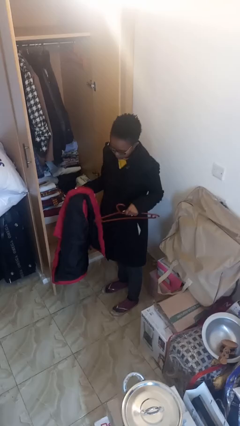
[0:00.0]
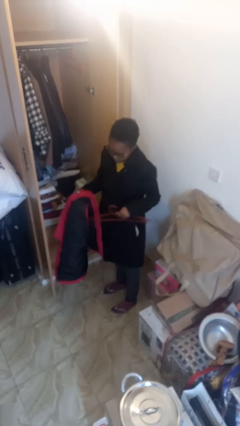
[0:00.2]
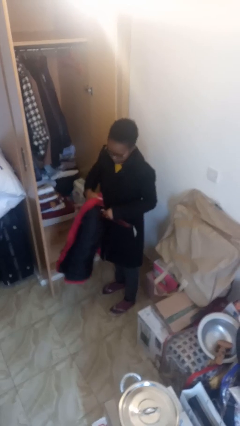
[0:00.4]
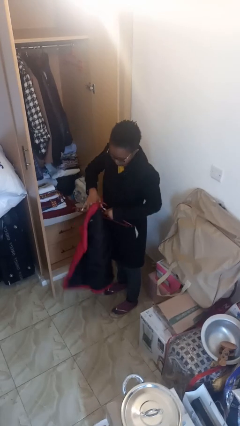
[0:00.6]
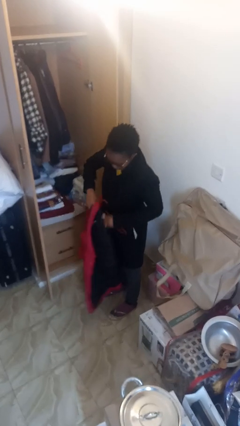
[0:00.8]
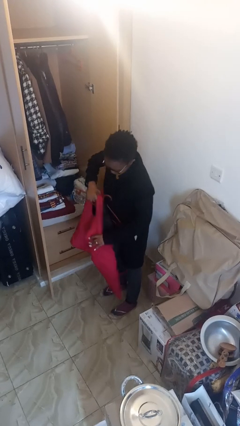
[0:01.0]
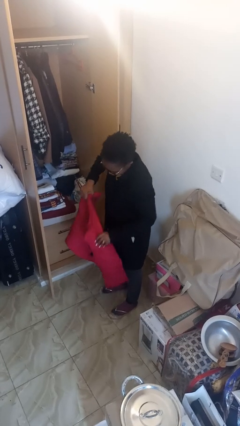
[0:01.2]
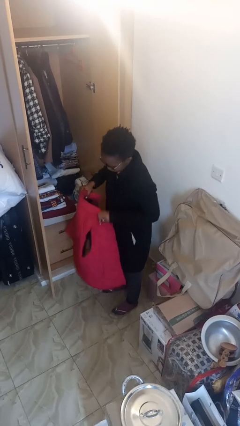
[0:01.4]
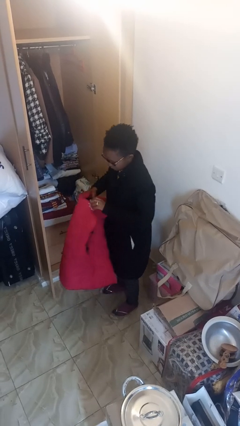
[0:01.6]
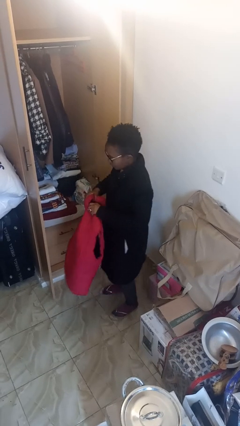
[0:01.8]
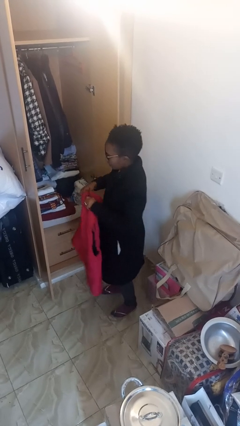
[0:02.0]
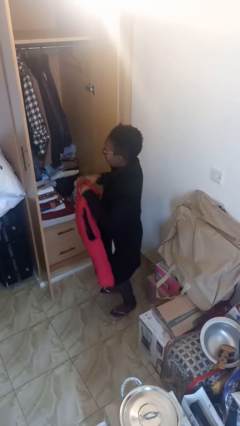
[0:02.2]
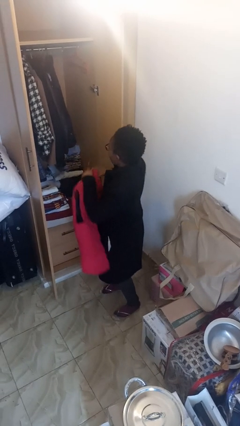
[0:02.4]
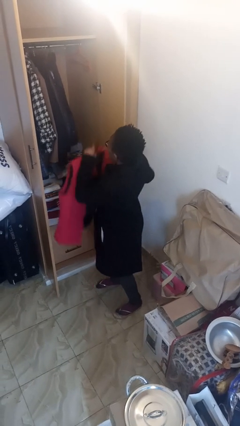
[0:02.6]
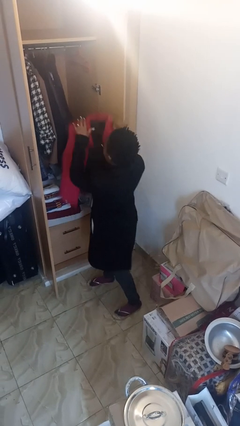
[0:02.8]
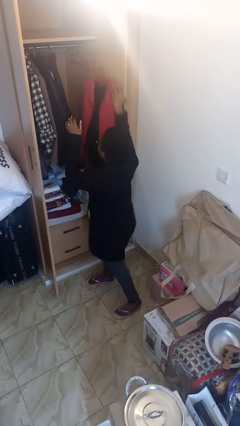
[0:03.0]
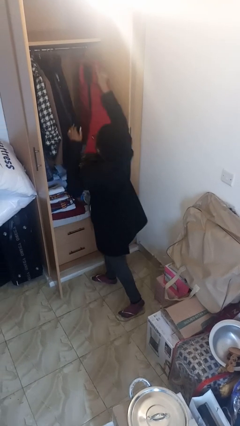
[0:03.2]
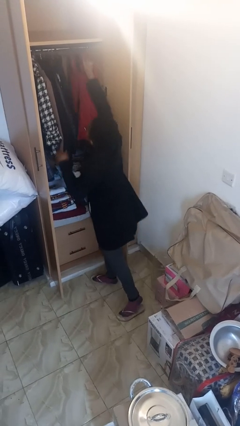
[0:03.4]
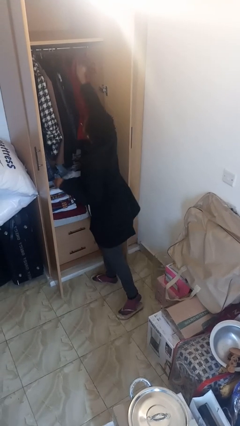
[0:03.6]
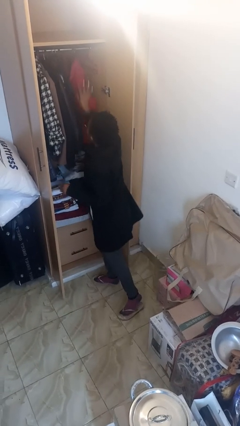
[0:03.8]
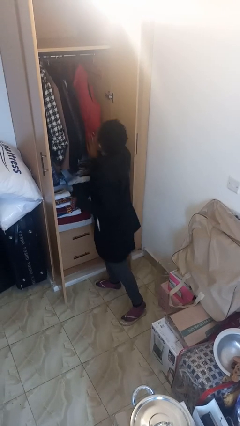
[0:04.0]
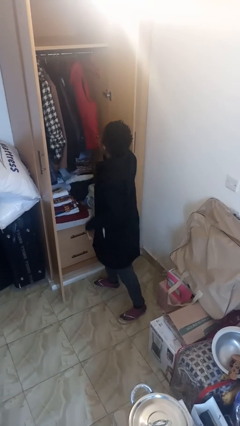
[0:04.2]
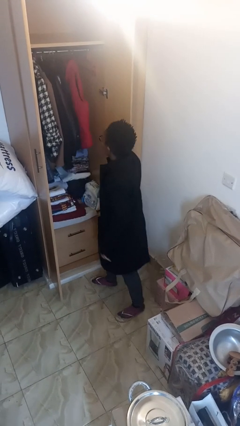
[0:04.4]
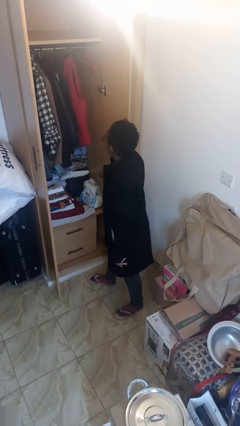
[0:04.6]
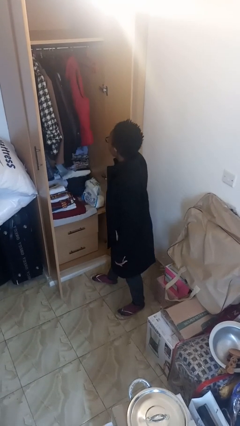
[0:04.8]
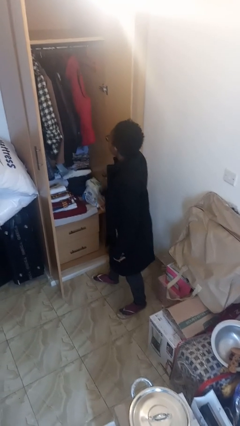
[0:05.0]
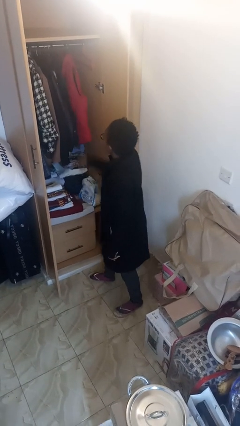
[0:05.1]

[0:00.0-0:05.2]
person puts clothes into closet

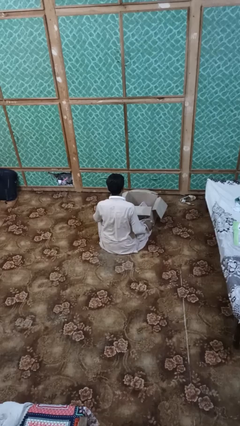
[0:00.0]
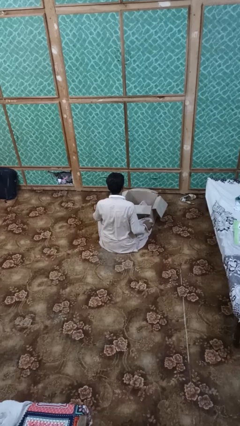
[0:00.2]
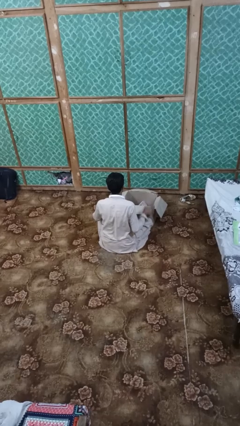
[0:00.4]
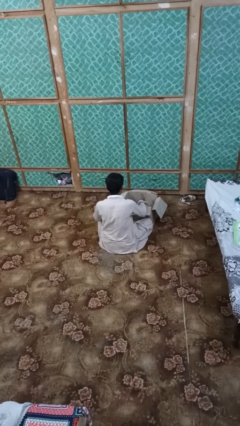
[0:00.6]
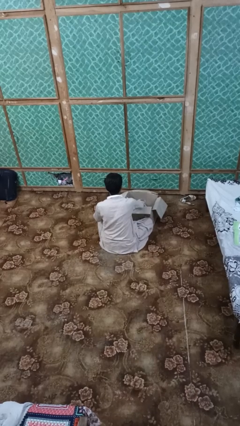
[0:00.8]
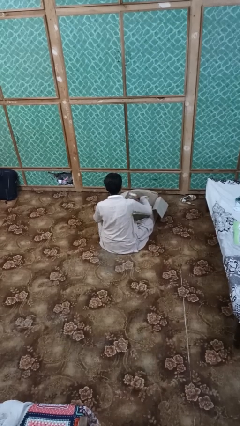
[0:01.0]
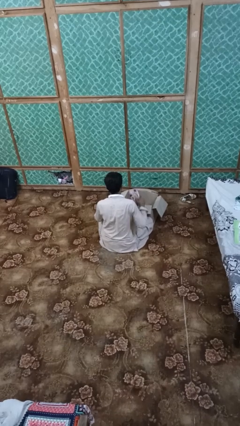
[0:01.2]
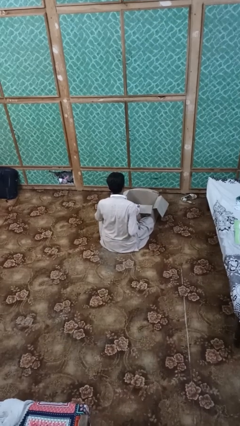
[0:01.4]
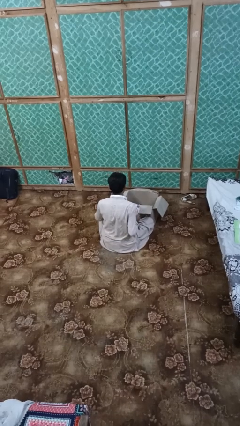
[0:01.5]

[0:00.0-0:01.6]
person takes object from box

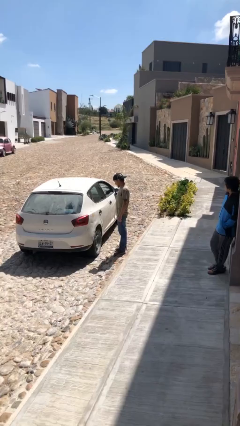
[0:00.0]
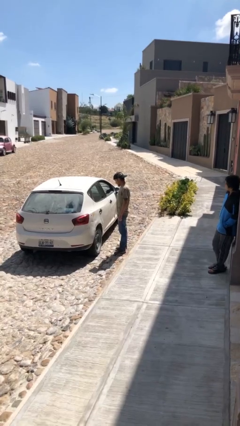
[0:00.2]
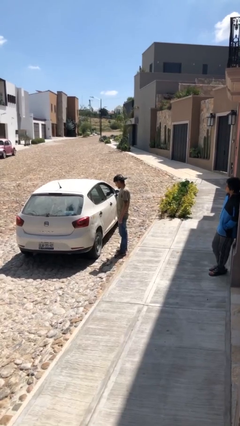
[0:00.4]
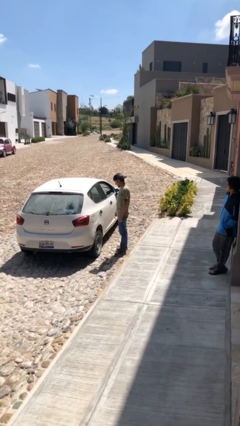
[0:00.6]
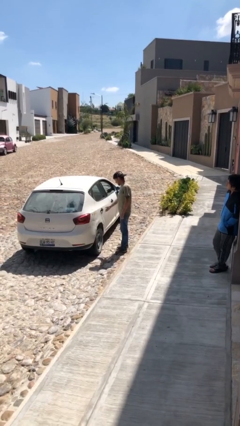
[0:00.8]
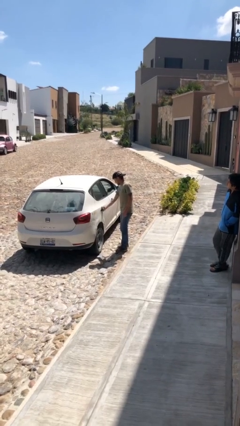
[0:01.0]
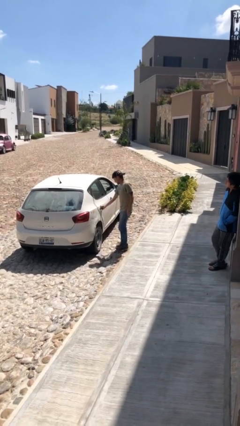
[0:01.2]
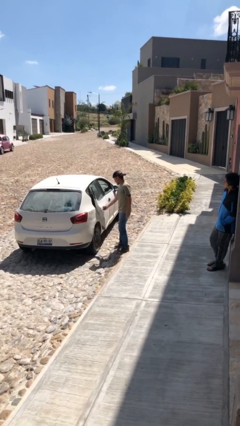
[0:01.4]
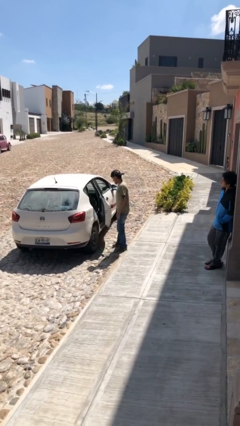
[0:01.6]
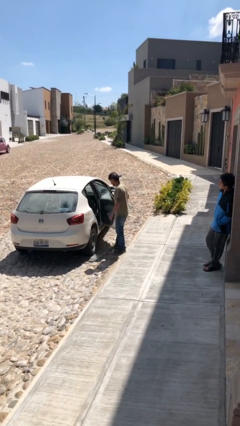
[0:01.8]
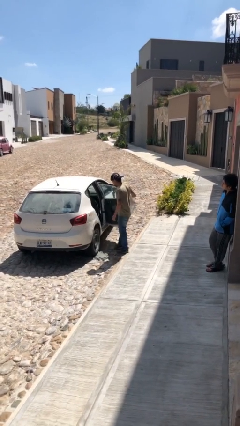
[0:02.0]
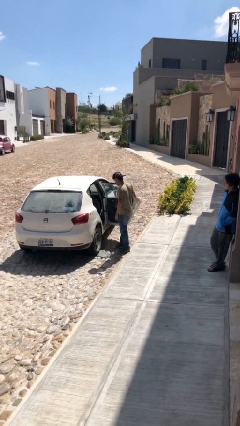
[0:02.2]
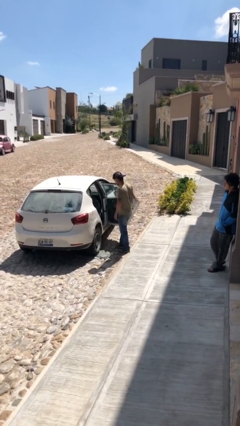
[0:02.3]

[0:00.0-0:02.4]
person opens car door

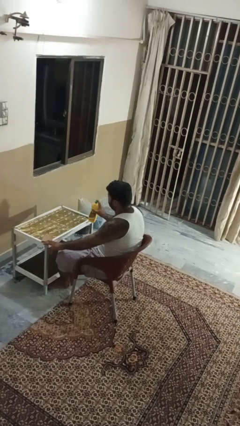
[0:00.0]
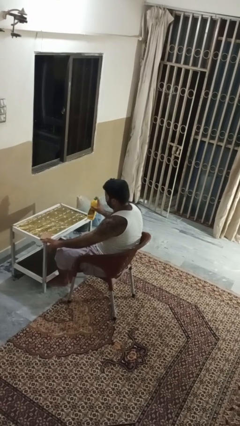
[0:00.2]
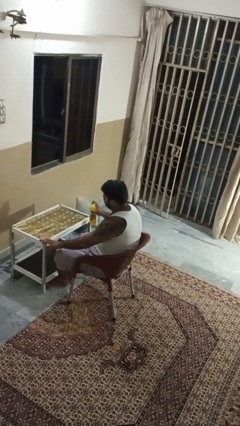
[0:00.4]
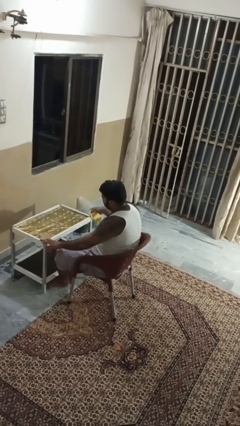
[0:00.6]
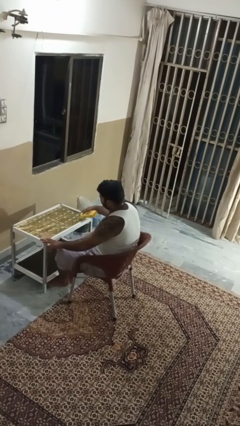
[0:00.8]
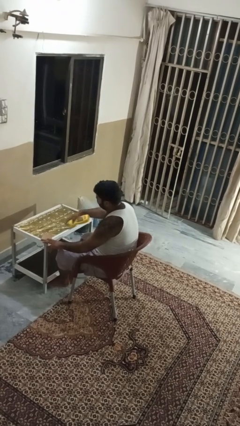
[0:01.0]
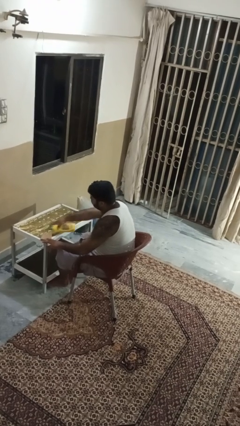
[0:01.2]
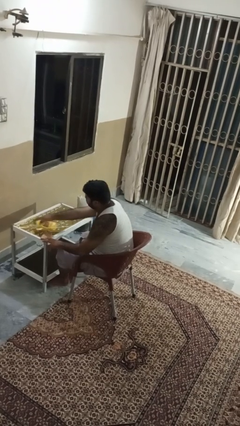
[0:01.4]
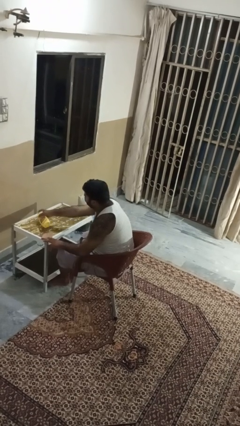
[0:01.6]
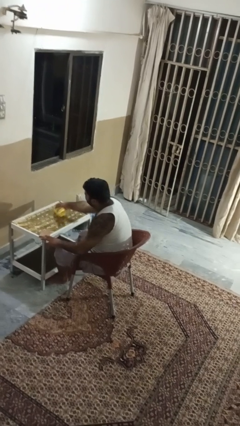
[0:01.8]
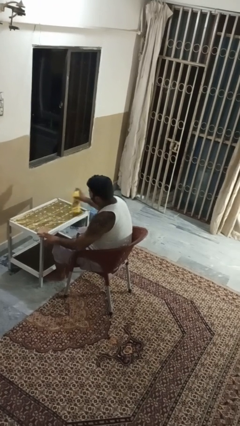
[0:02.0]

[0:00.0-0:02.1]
person sprays from bottle

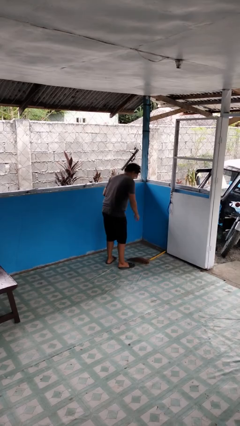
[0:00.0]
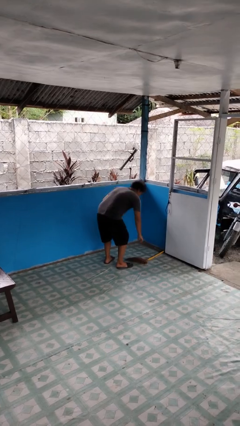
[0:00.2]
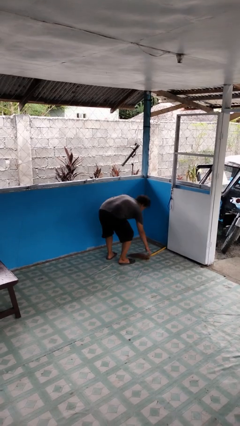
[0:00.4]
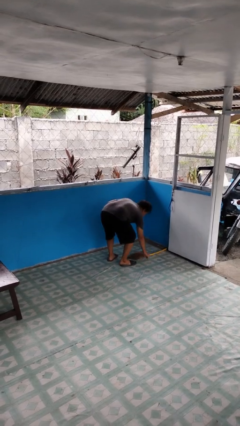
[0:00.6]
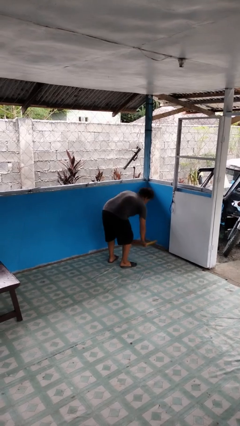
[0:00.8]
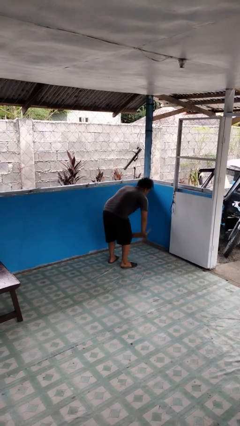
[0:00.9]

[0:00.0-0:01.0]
person picks up object from floor

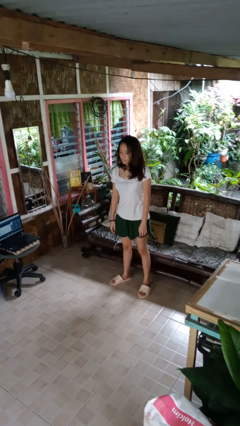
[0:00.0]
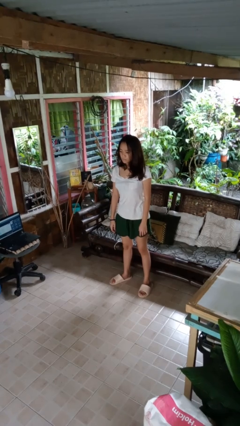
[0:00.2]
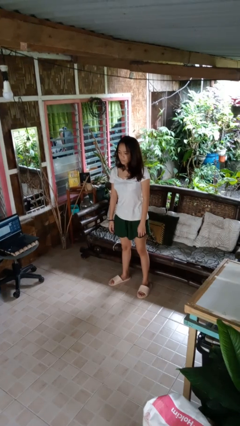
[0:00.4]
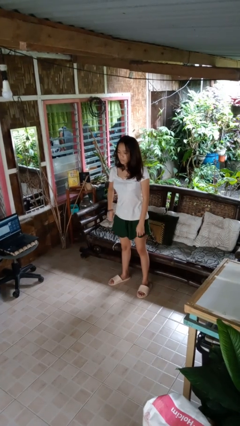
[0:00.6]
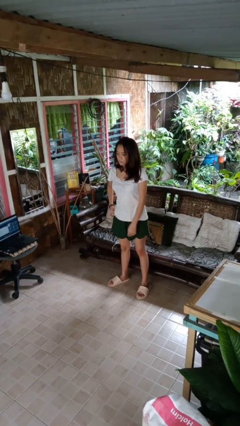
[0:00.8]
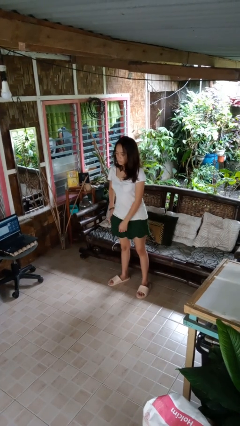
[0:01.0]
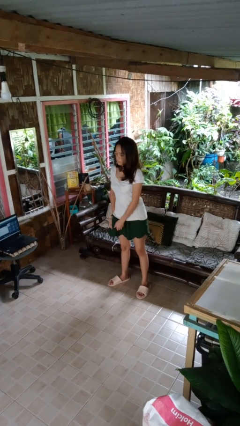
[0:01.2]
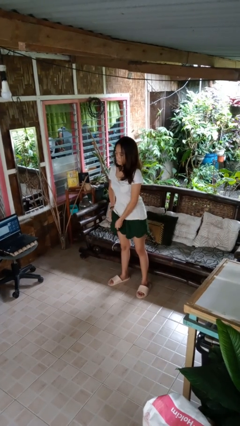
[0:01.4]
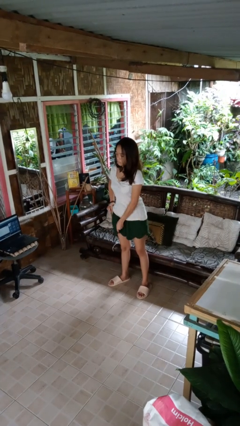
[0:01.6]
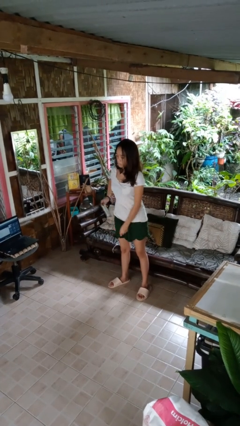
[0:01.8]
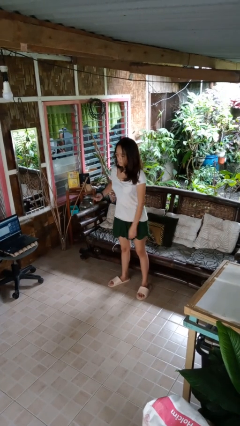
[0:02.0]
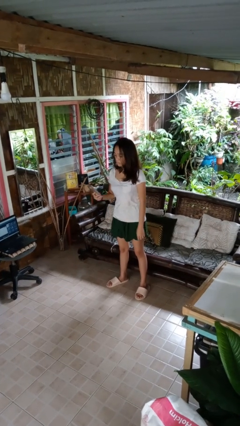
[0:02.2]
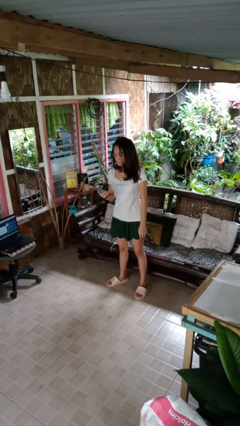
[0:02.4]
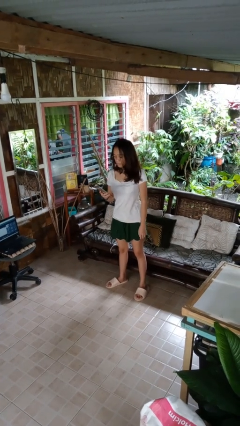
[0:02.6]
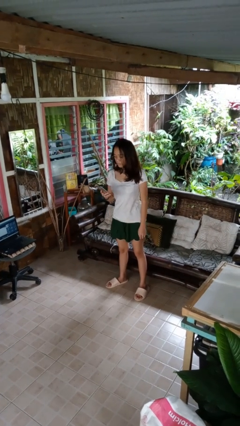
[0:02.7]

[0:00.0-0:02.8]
person takes phone from pocket

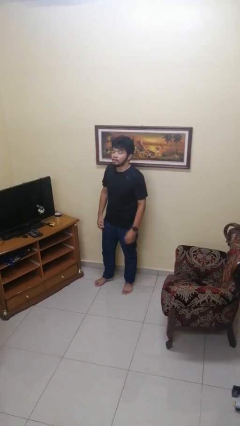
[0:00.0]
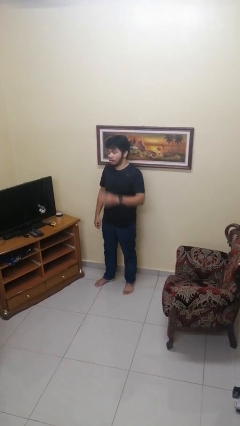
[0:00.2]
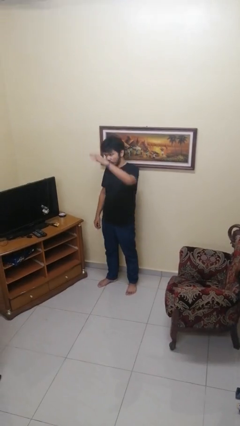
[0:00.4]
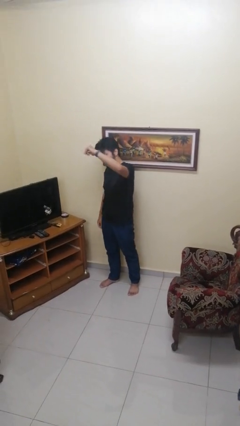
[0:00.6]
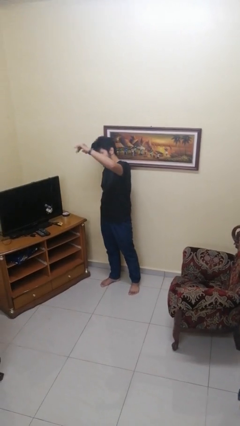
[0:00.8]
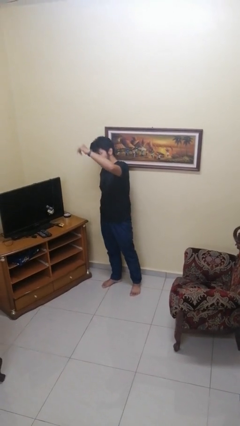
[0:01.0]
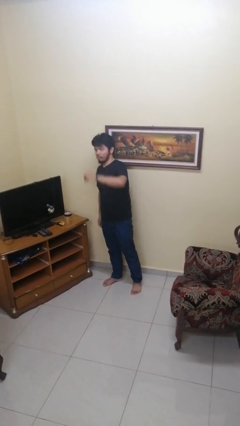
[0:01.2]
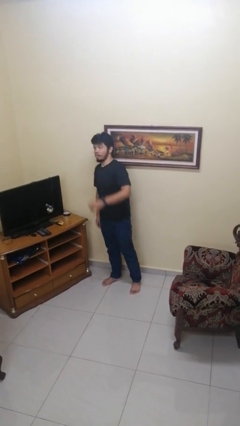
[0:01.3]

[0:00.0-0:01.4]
person gestures come here

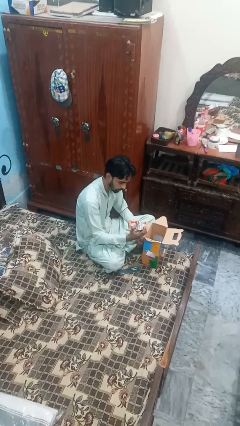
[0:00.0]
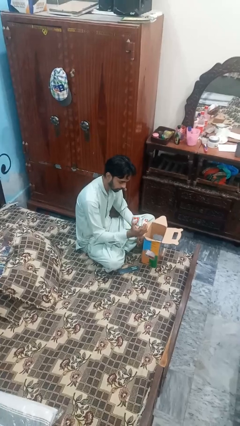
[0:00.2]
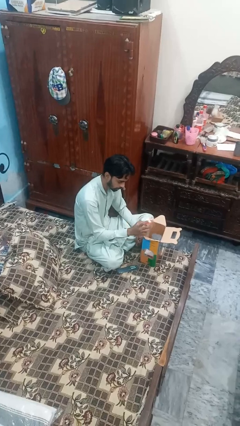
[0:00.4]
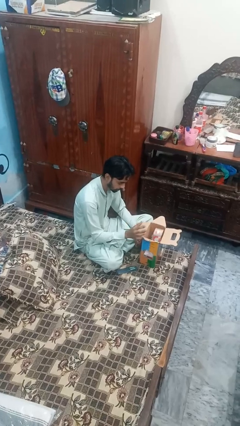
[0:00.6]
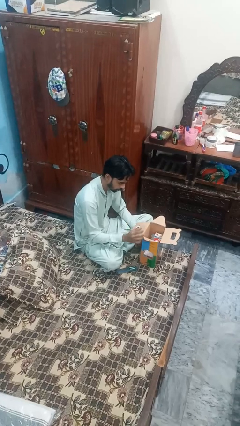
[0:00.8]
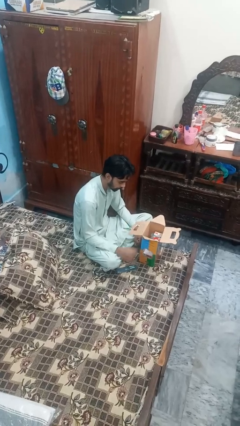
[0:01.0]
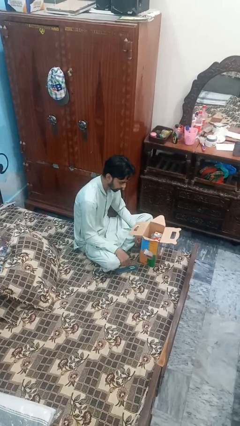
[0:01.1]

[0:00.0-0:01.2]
person puts object into box
